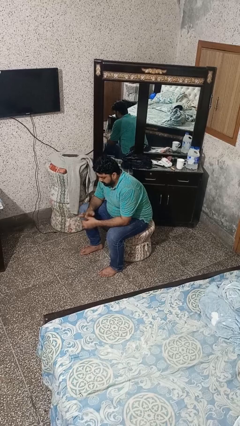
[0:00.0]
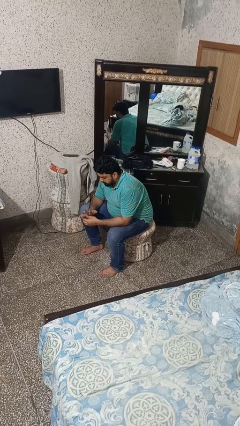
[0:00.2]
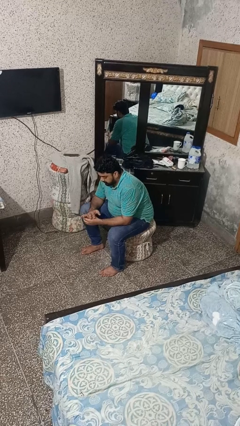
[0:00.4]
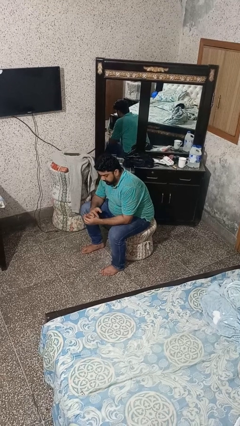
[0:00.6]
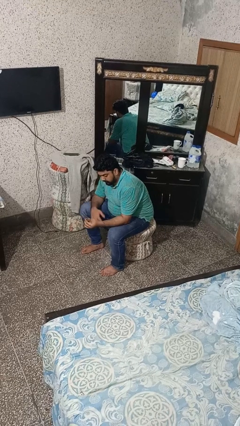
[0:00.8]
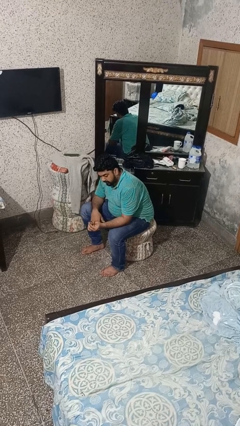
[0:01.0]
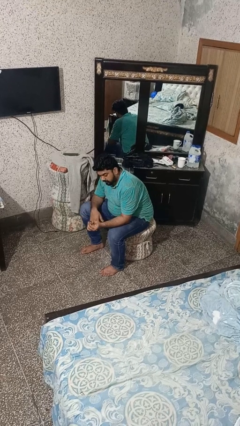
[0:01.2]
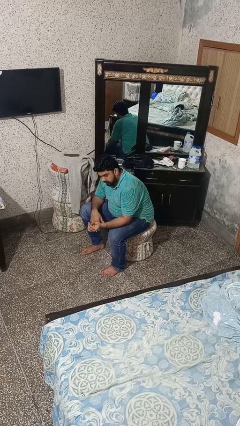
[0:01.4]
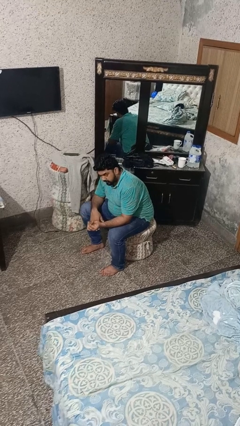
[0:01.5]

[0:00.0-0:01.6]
person takes off ring

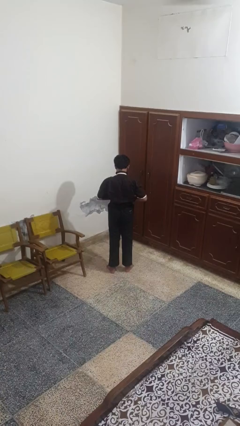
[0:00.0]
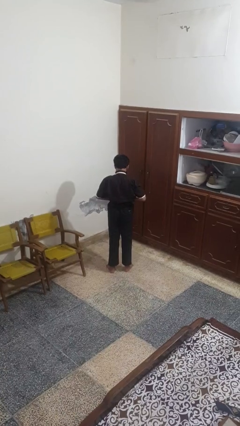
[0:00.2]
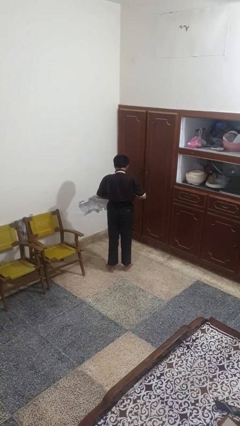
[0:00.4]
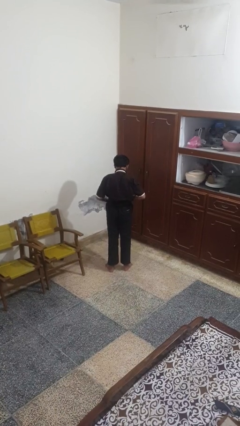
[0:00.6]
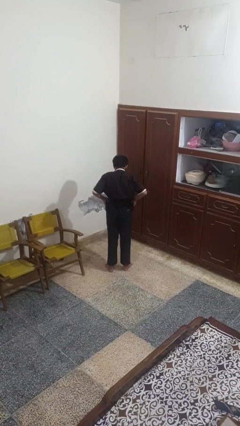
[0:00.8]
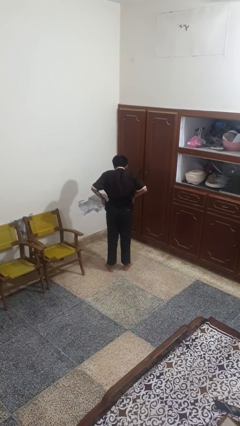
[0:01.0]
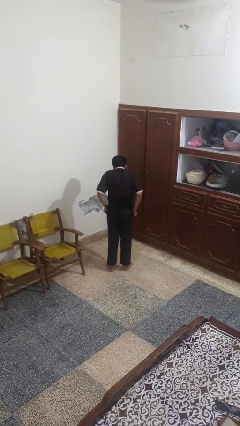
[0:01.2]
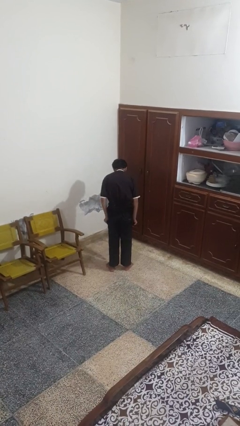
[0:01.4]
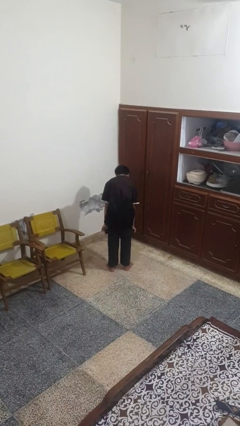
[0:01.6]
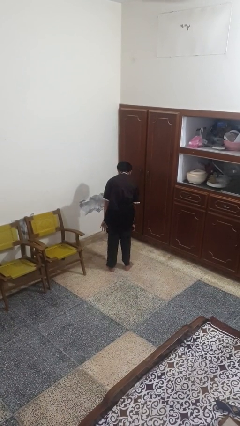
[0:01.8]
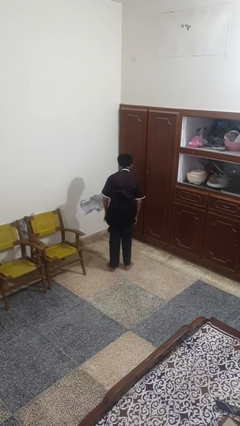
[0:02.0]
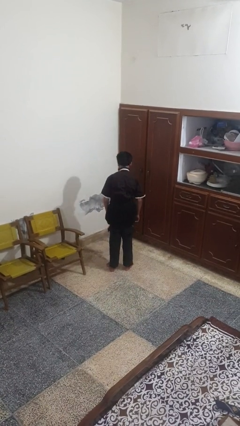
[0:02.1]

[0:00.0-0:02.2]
person takes off pants

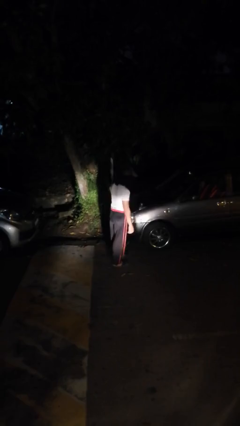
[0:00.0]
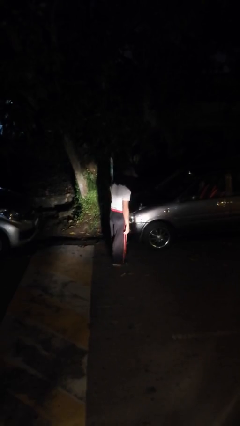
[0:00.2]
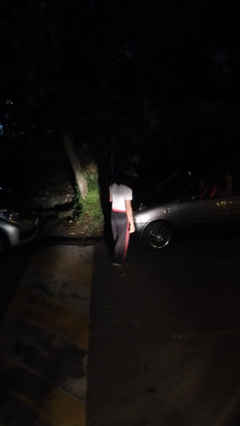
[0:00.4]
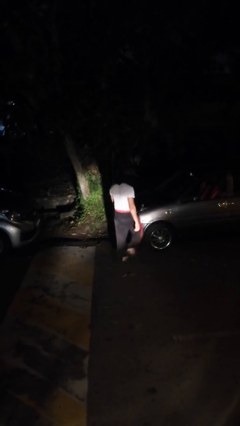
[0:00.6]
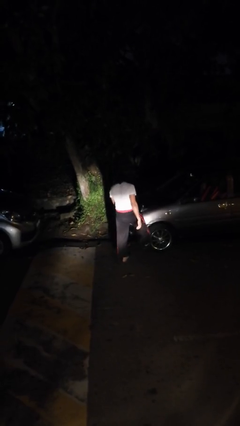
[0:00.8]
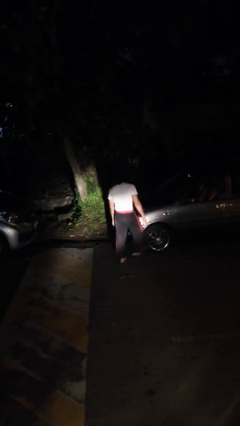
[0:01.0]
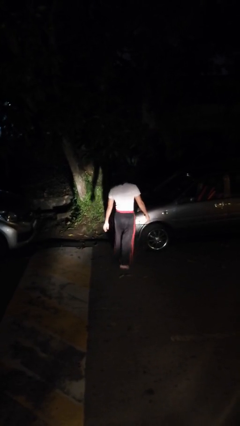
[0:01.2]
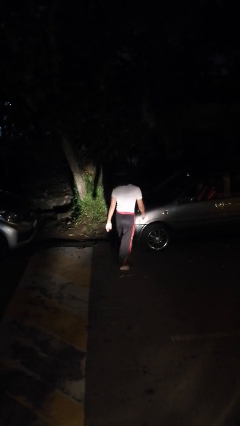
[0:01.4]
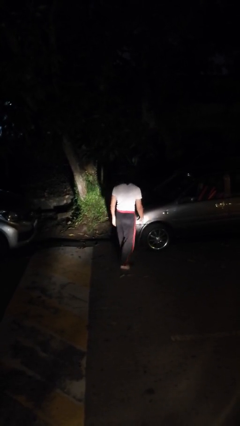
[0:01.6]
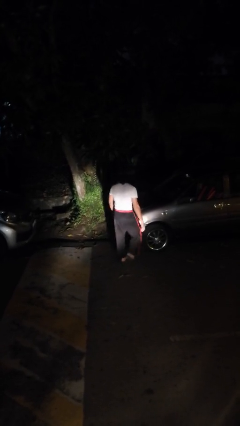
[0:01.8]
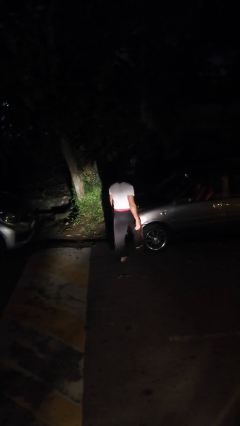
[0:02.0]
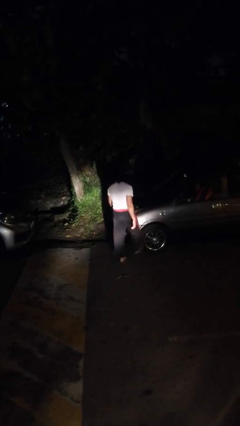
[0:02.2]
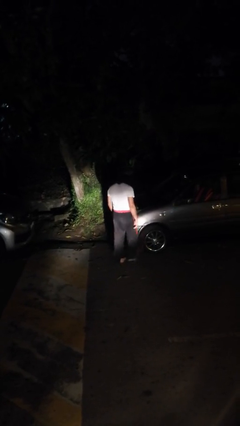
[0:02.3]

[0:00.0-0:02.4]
person kicks car tires

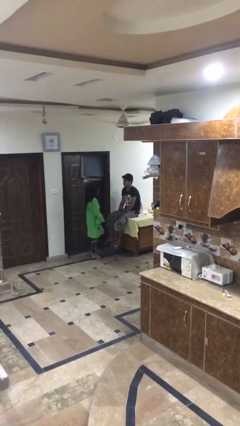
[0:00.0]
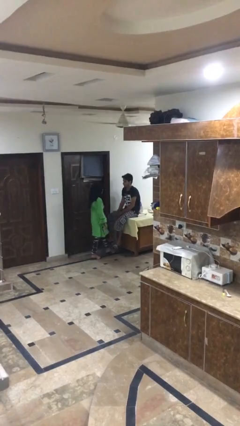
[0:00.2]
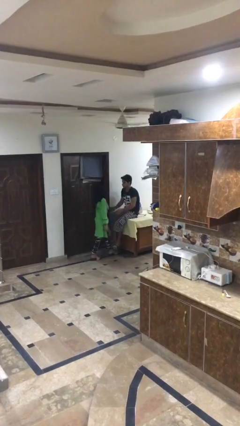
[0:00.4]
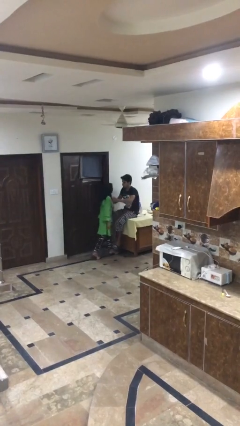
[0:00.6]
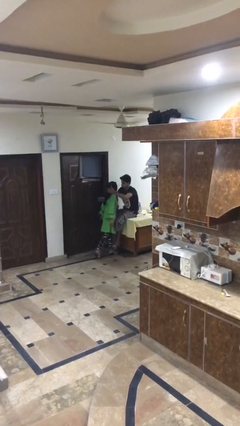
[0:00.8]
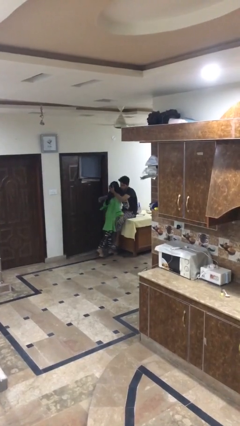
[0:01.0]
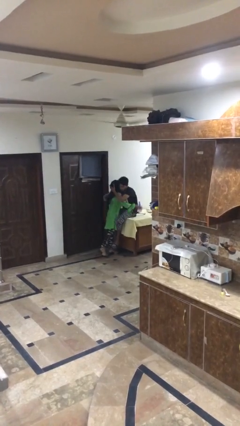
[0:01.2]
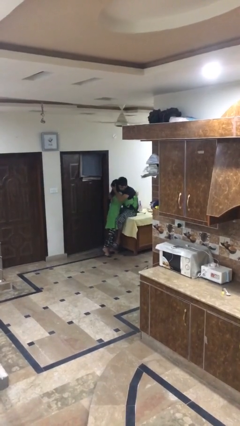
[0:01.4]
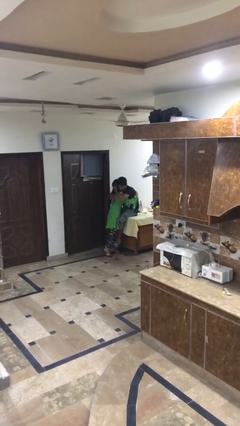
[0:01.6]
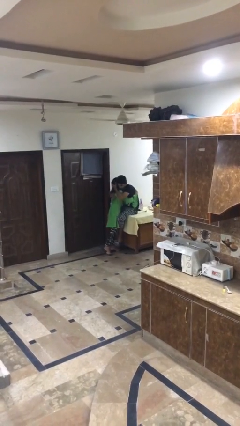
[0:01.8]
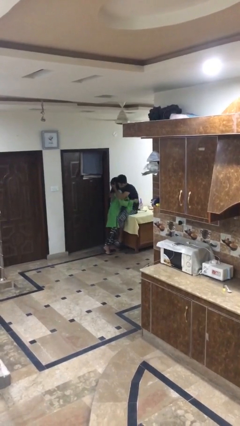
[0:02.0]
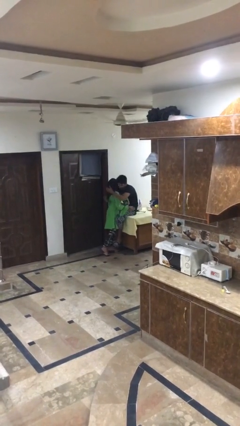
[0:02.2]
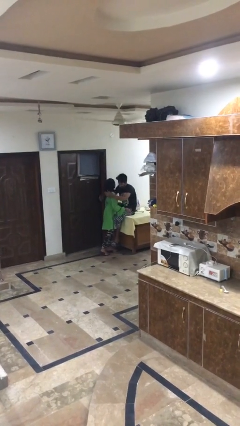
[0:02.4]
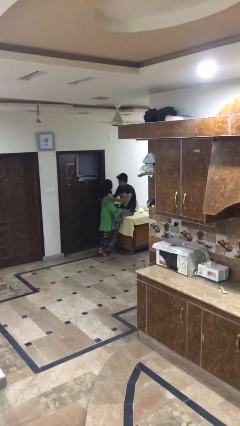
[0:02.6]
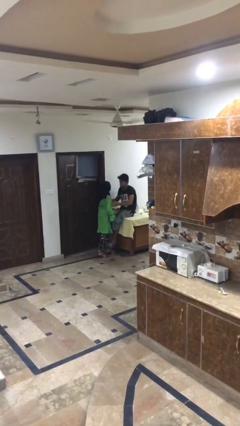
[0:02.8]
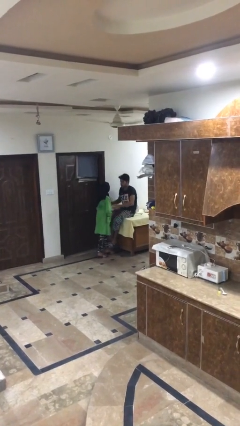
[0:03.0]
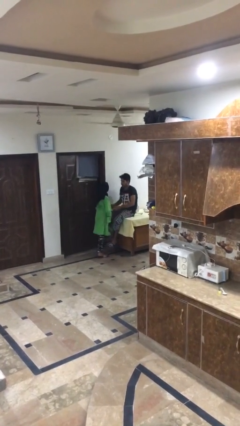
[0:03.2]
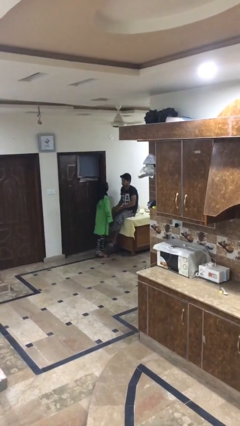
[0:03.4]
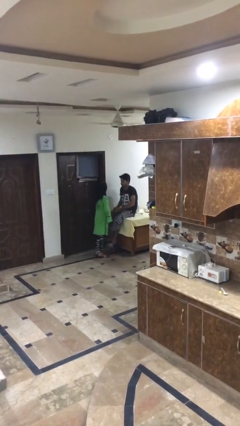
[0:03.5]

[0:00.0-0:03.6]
person embraces person

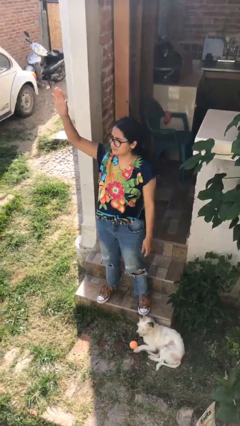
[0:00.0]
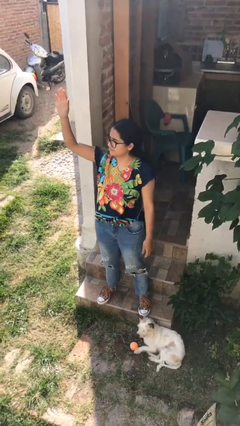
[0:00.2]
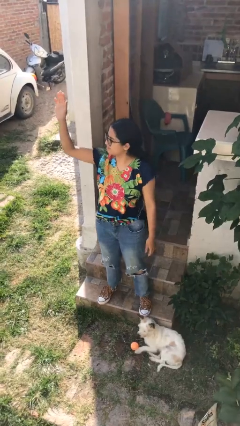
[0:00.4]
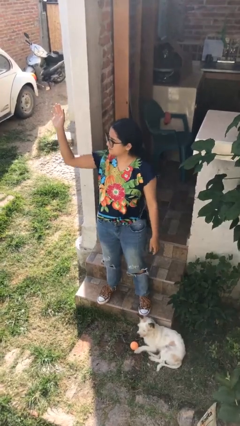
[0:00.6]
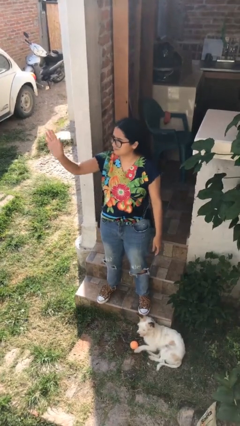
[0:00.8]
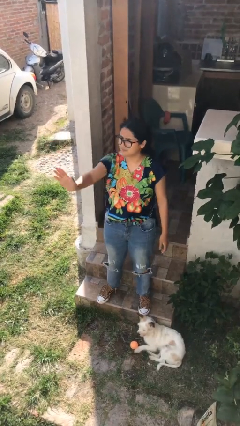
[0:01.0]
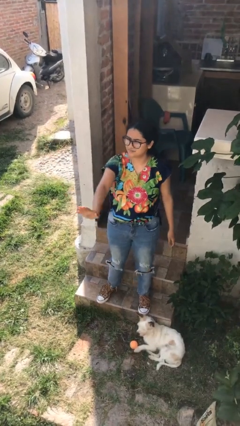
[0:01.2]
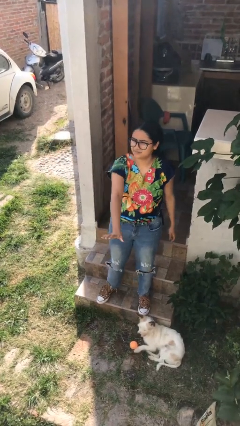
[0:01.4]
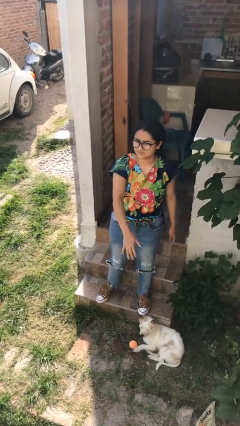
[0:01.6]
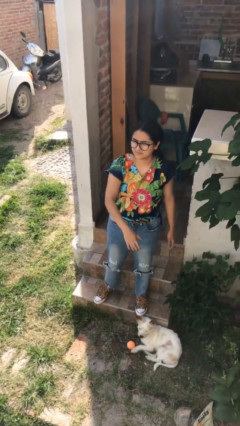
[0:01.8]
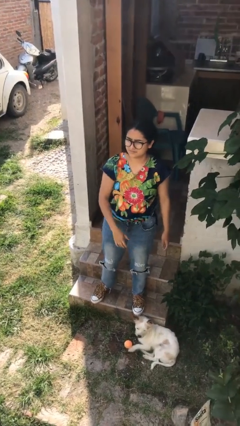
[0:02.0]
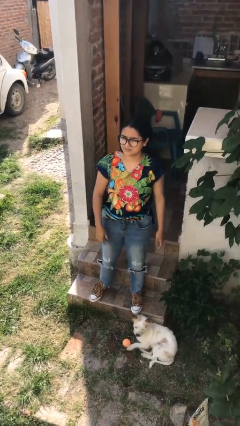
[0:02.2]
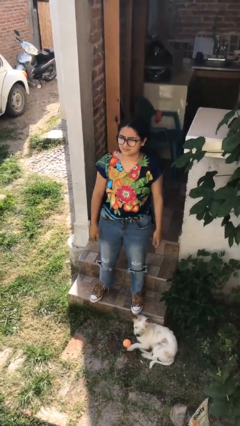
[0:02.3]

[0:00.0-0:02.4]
person gestures swipe down

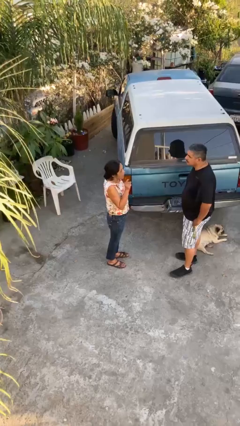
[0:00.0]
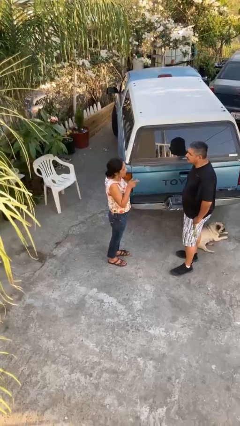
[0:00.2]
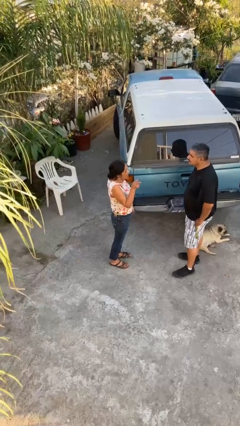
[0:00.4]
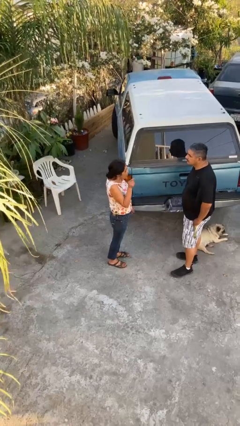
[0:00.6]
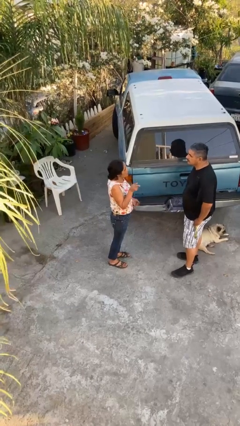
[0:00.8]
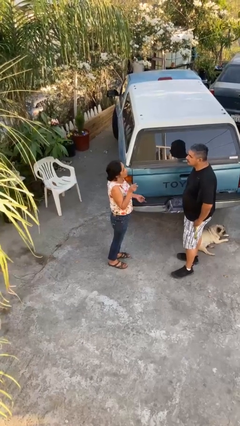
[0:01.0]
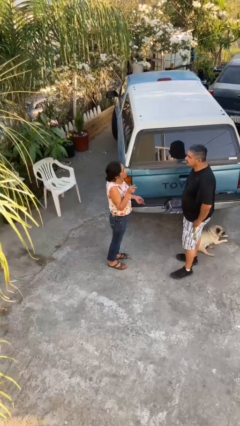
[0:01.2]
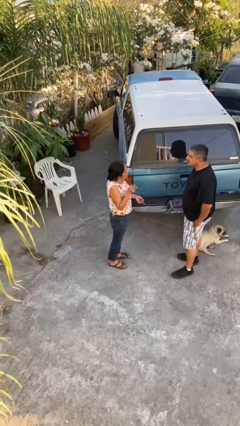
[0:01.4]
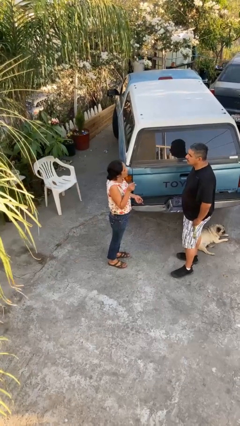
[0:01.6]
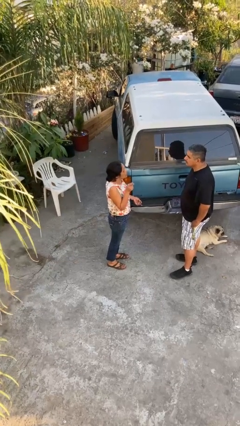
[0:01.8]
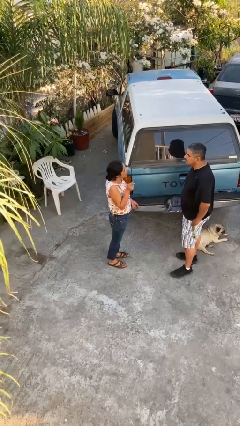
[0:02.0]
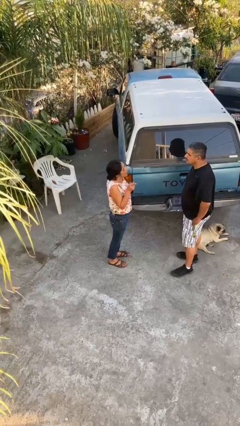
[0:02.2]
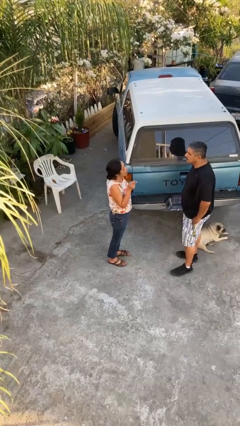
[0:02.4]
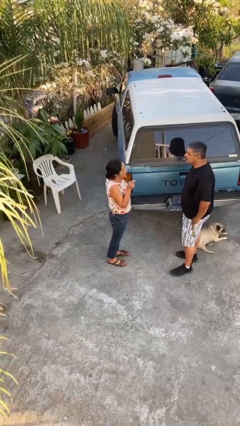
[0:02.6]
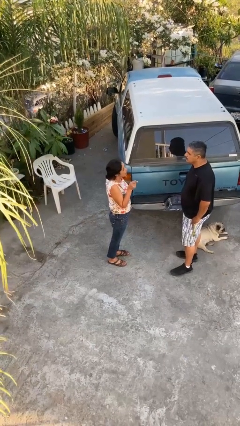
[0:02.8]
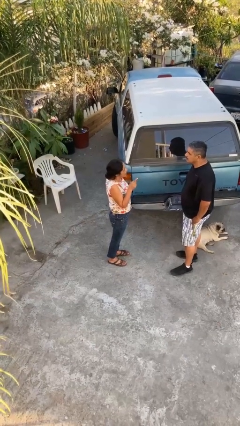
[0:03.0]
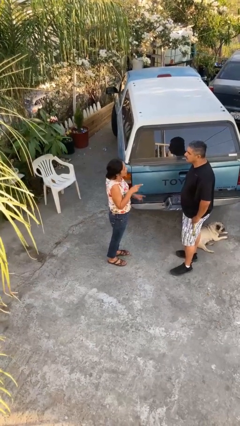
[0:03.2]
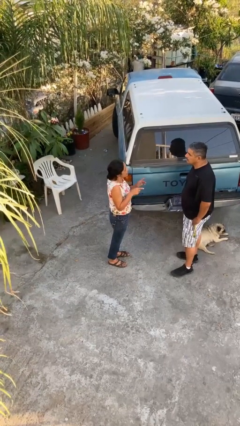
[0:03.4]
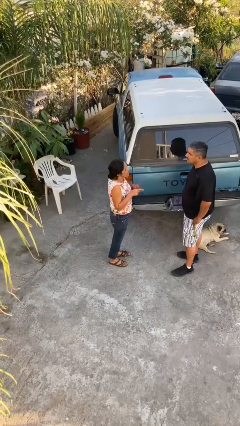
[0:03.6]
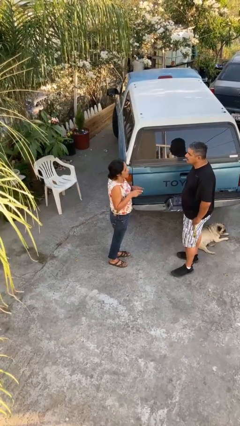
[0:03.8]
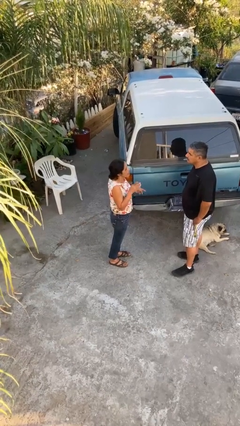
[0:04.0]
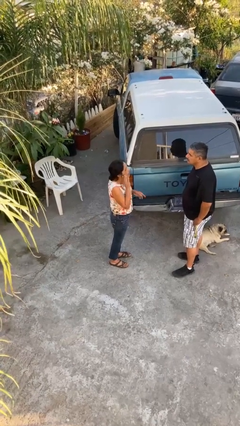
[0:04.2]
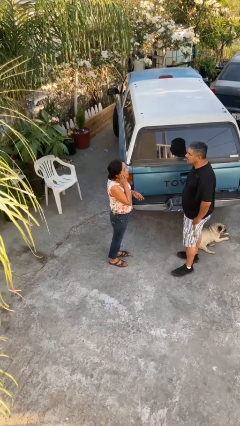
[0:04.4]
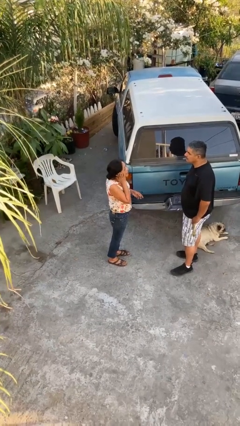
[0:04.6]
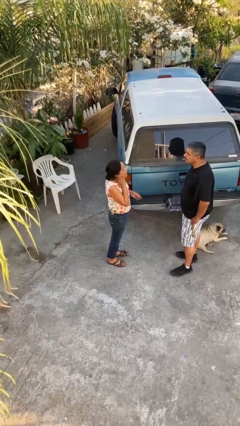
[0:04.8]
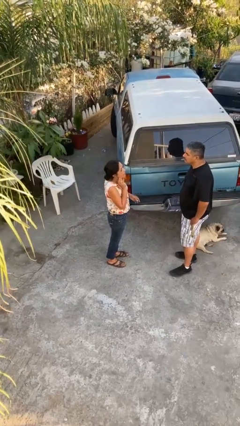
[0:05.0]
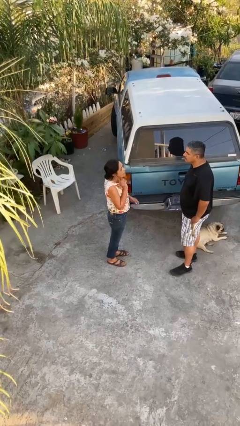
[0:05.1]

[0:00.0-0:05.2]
person talks to person
